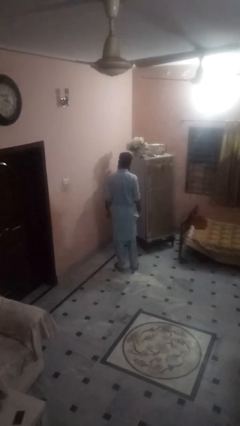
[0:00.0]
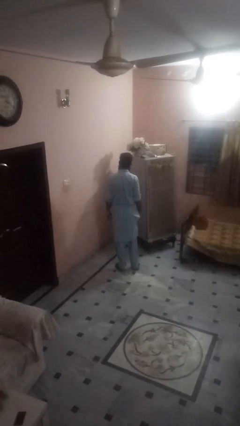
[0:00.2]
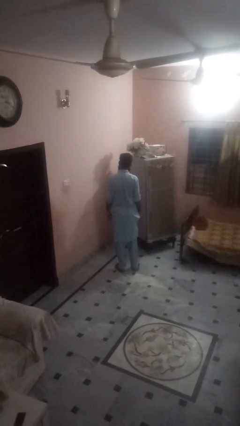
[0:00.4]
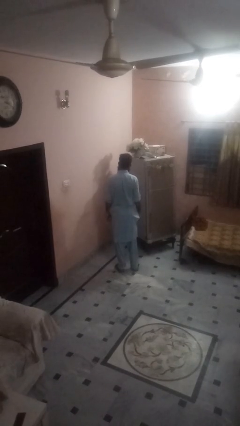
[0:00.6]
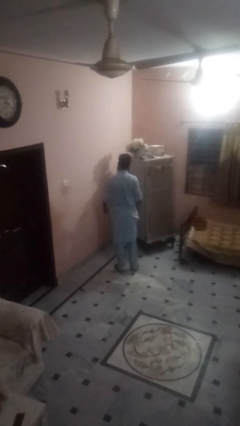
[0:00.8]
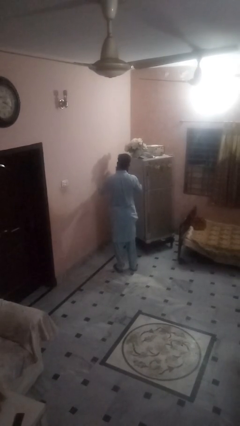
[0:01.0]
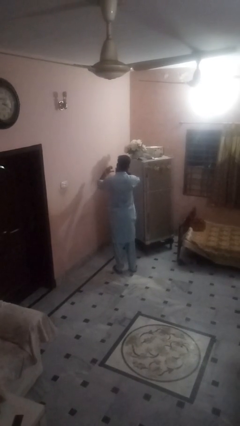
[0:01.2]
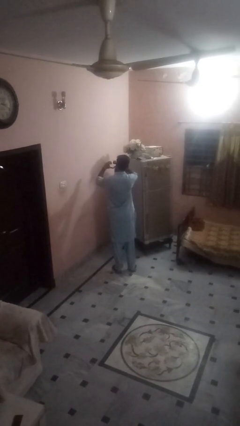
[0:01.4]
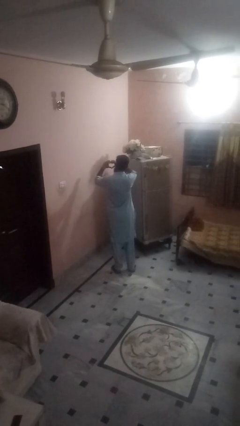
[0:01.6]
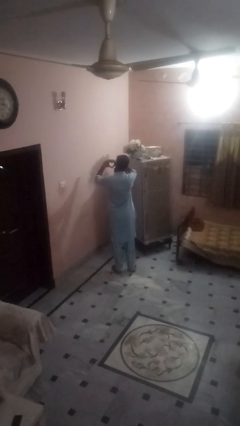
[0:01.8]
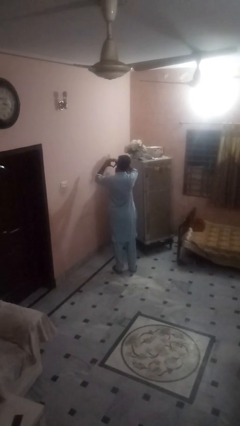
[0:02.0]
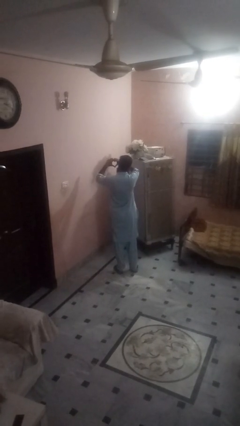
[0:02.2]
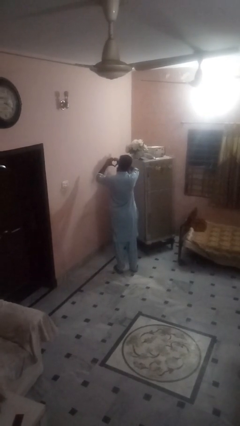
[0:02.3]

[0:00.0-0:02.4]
person gestures heart

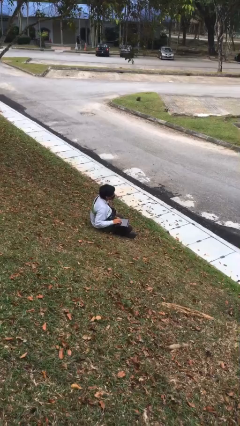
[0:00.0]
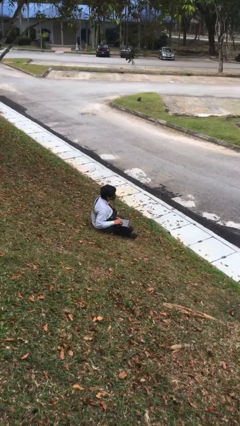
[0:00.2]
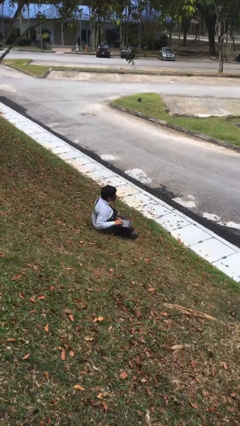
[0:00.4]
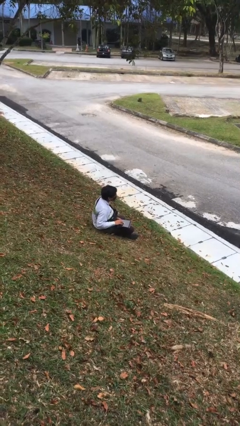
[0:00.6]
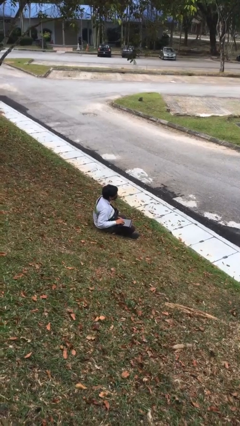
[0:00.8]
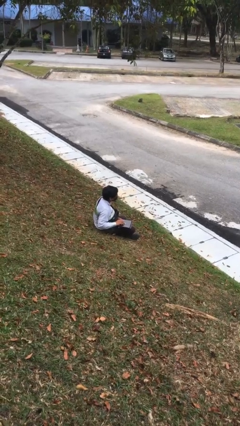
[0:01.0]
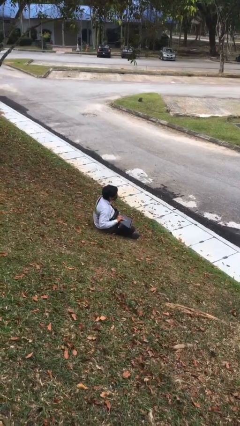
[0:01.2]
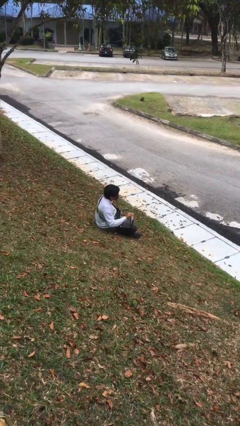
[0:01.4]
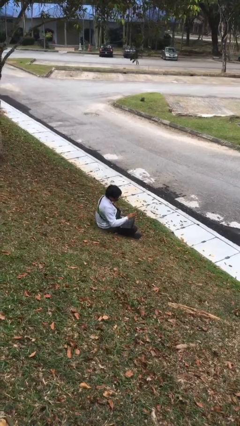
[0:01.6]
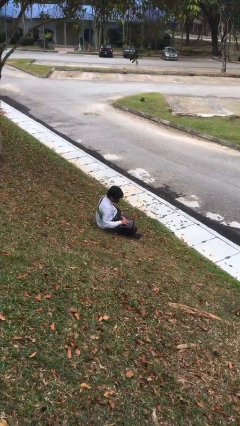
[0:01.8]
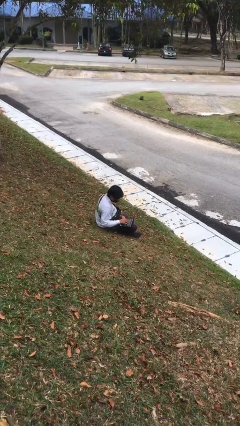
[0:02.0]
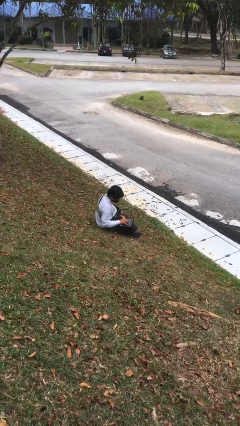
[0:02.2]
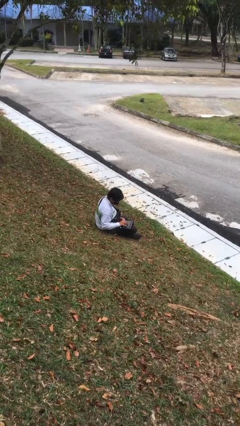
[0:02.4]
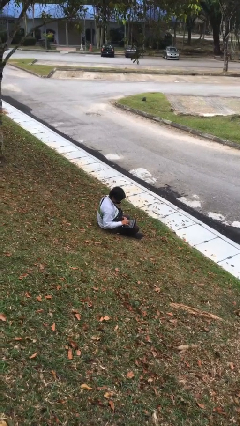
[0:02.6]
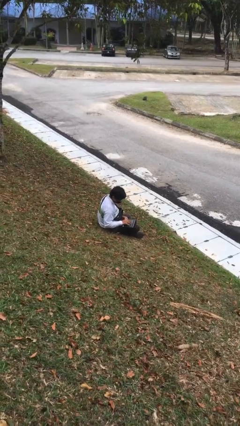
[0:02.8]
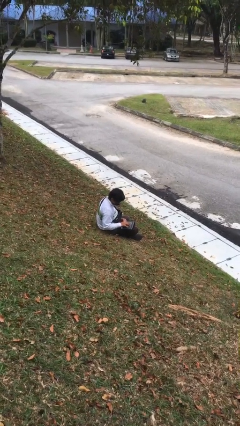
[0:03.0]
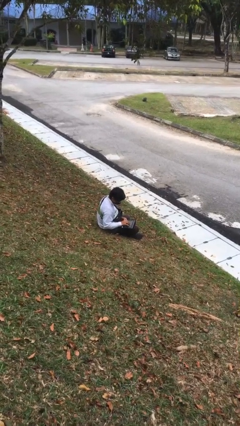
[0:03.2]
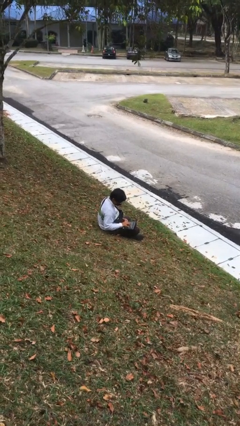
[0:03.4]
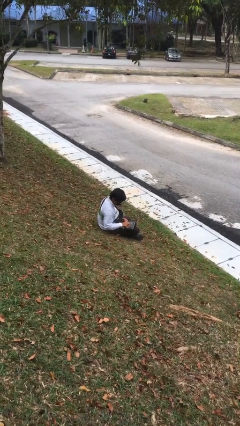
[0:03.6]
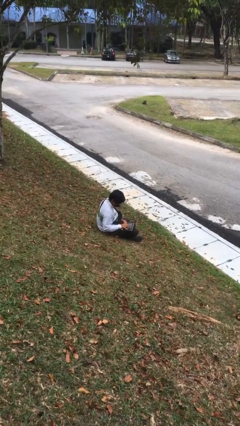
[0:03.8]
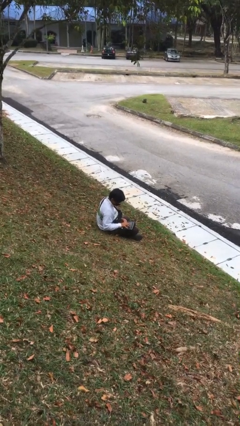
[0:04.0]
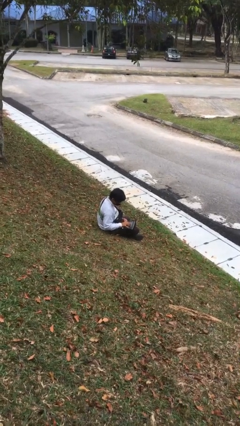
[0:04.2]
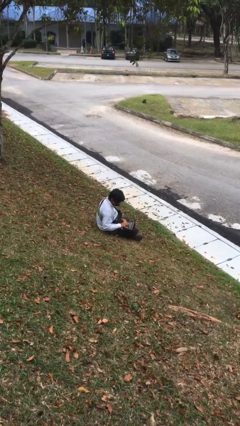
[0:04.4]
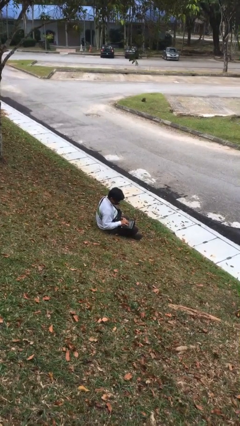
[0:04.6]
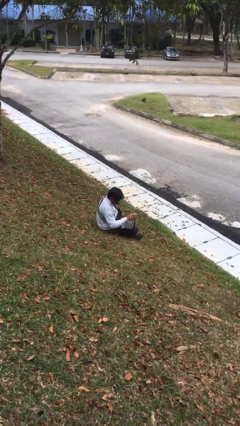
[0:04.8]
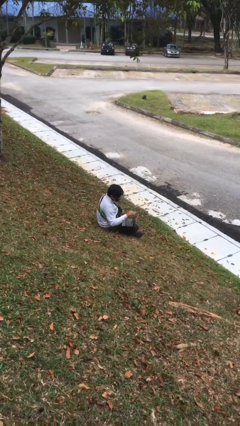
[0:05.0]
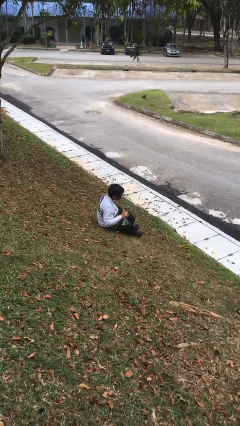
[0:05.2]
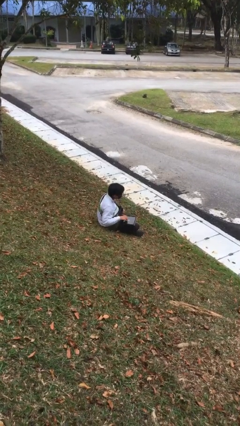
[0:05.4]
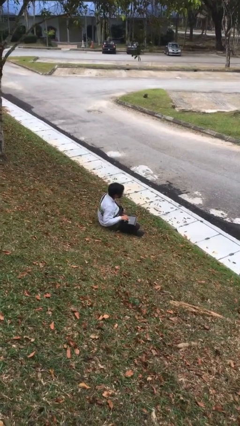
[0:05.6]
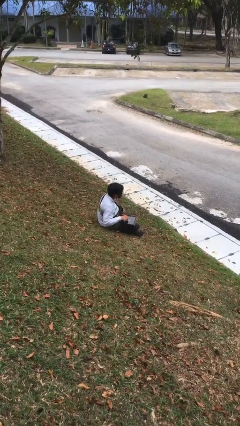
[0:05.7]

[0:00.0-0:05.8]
person interacts with laptop

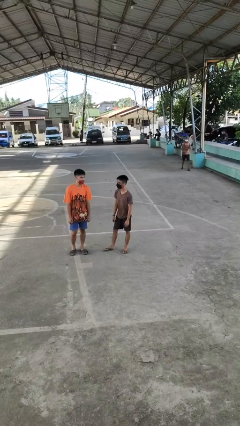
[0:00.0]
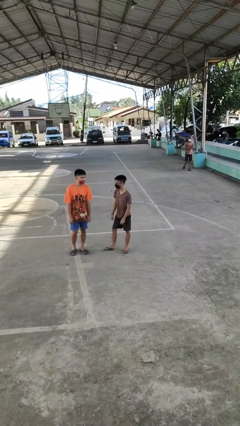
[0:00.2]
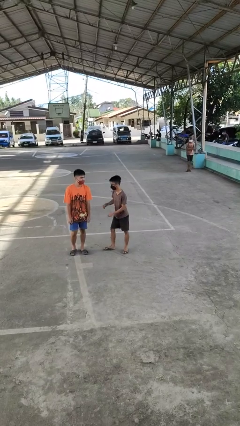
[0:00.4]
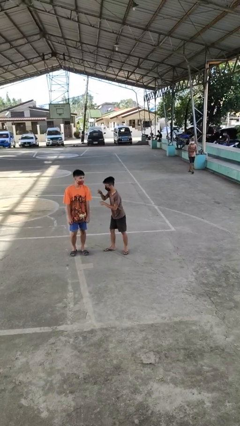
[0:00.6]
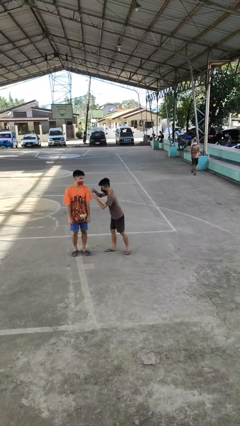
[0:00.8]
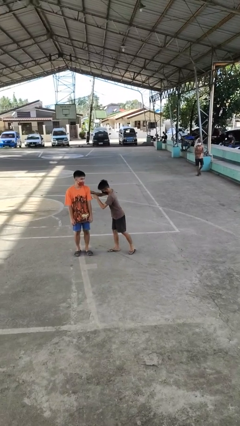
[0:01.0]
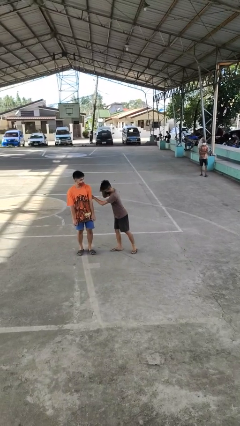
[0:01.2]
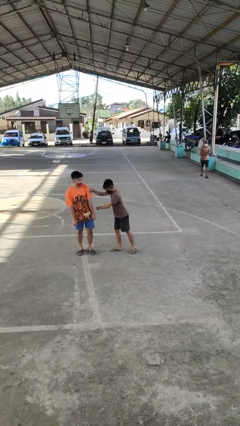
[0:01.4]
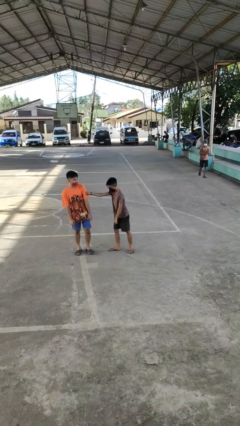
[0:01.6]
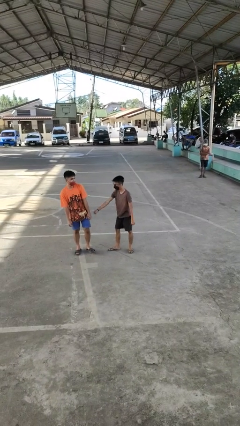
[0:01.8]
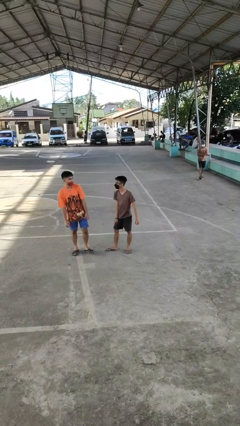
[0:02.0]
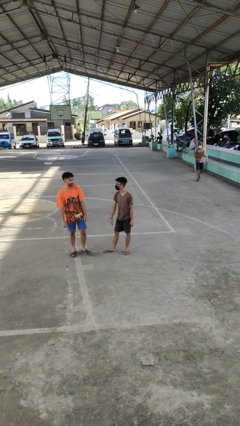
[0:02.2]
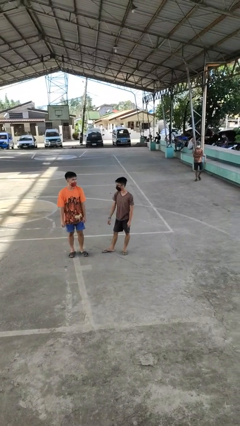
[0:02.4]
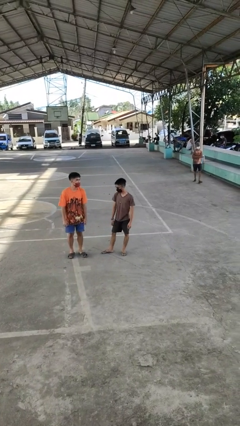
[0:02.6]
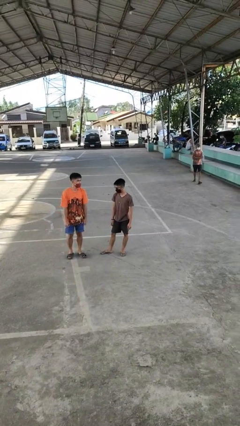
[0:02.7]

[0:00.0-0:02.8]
person pounds shoulders of person

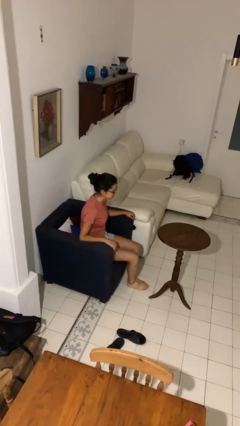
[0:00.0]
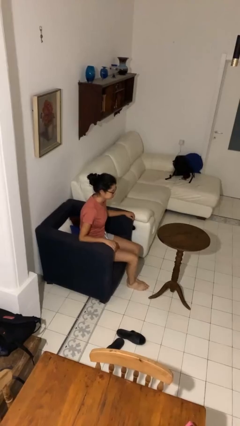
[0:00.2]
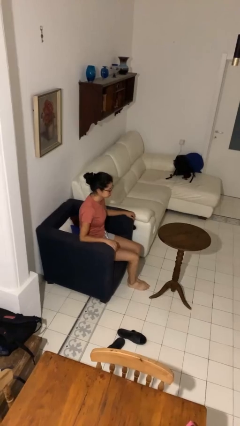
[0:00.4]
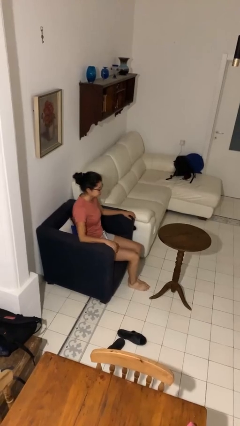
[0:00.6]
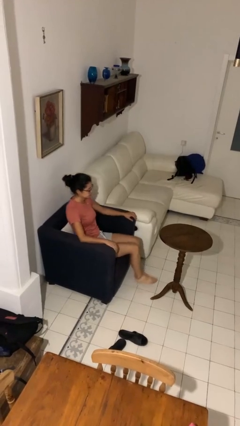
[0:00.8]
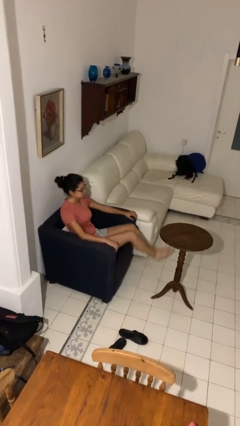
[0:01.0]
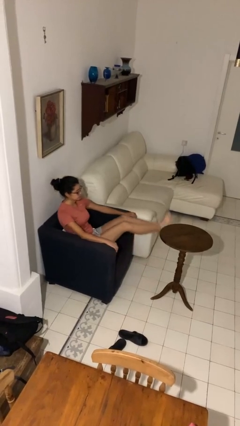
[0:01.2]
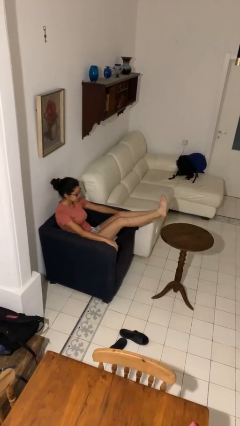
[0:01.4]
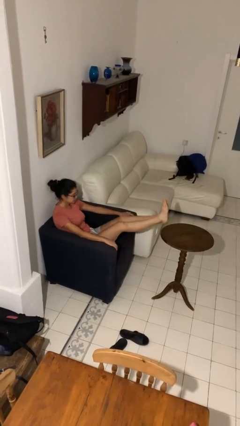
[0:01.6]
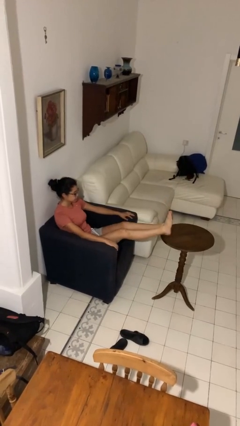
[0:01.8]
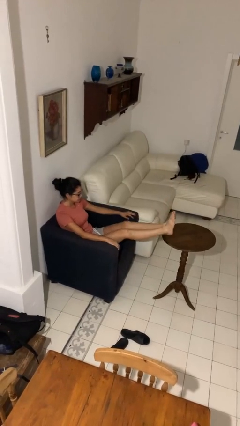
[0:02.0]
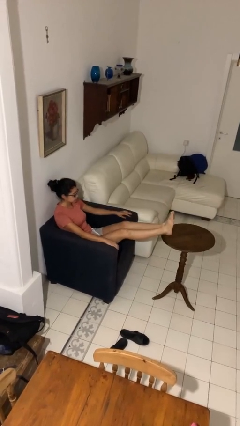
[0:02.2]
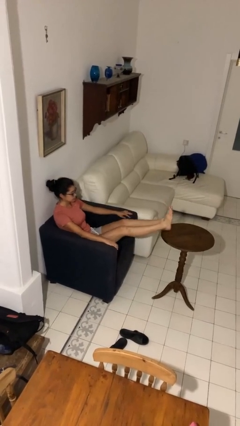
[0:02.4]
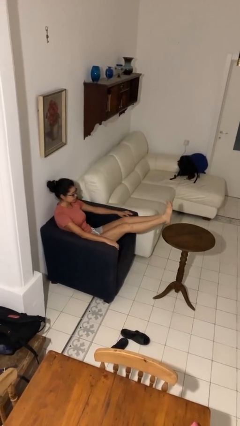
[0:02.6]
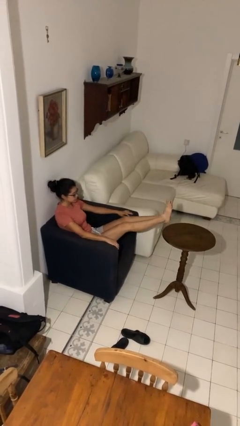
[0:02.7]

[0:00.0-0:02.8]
person puts feet up

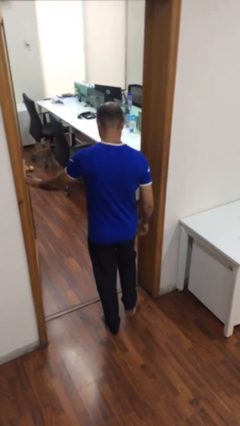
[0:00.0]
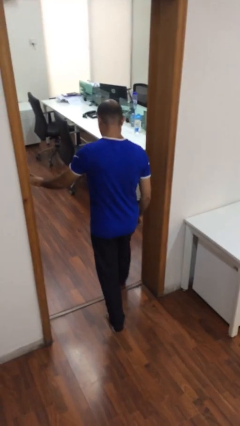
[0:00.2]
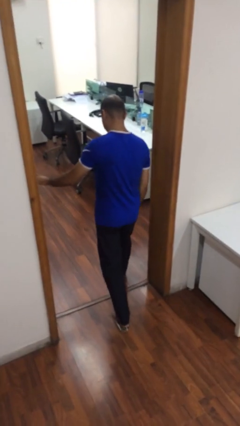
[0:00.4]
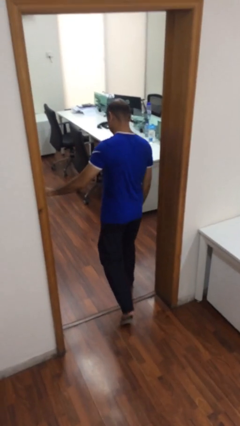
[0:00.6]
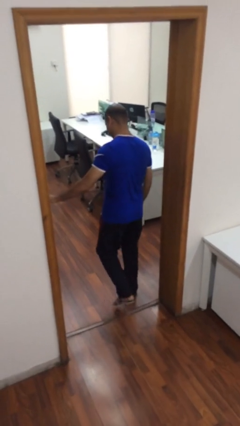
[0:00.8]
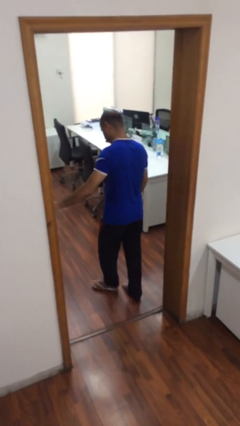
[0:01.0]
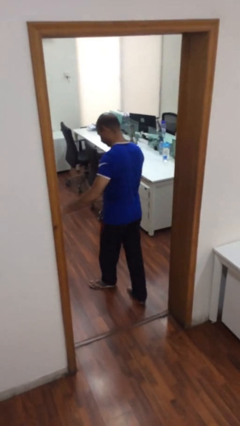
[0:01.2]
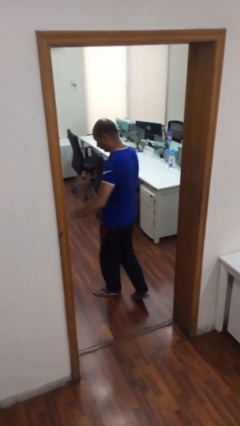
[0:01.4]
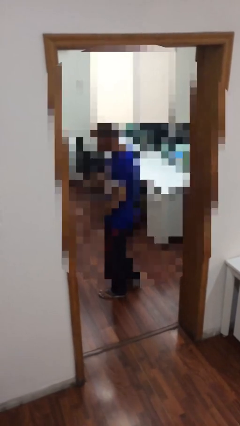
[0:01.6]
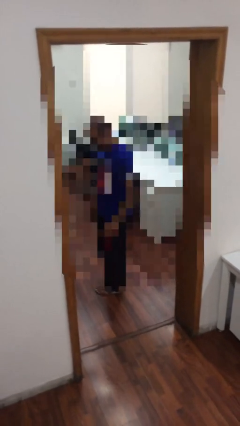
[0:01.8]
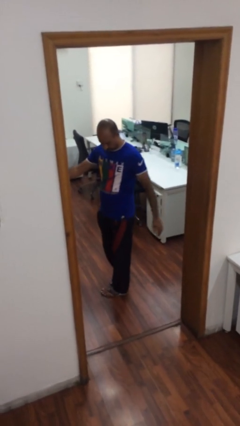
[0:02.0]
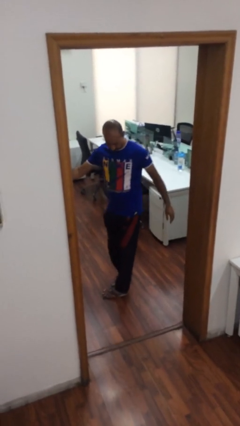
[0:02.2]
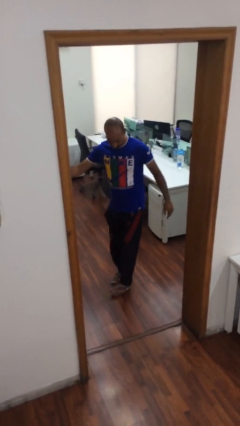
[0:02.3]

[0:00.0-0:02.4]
person exits scene through structure

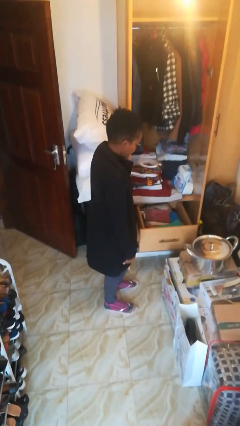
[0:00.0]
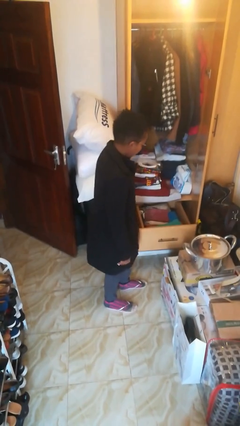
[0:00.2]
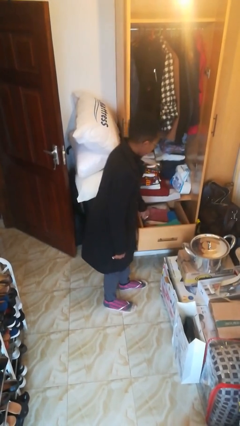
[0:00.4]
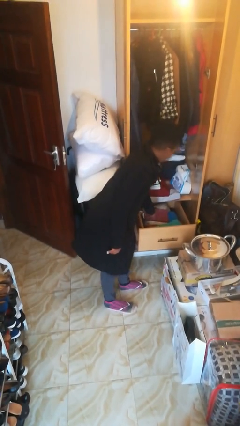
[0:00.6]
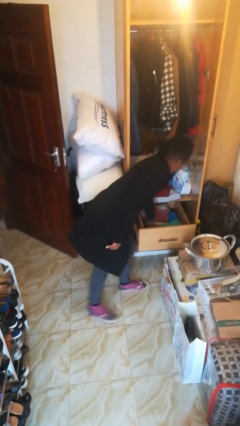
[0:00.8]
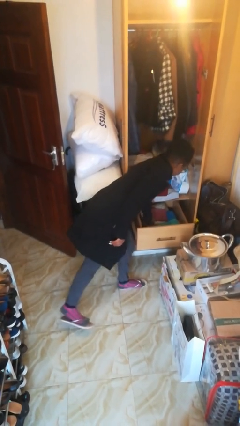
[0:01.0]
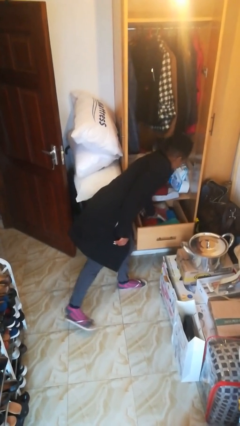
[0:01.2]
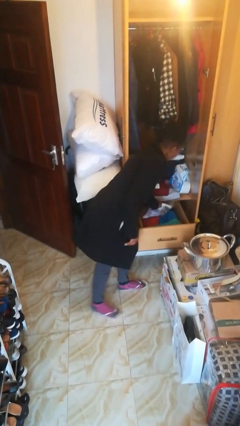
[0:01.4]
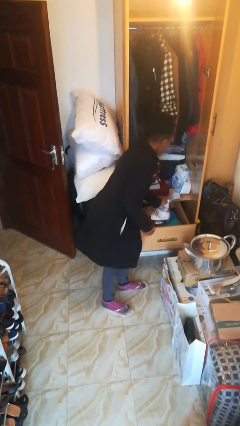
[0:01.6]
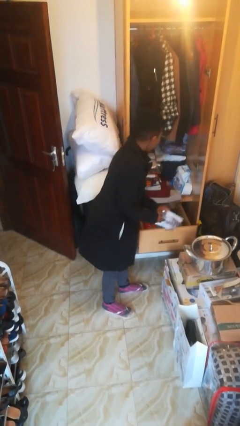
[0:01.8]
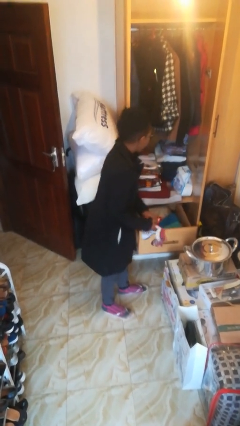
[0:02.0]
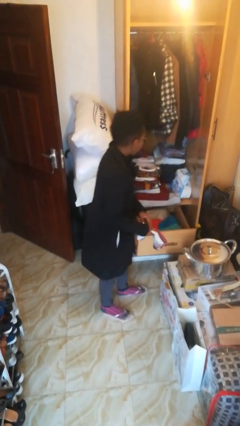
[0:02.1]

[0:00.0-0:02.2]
person takes clothes from dresser
